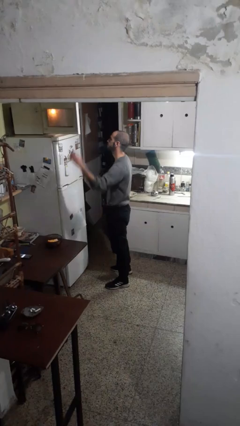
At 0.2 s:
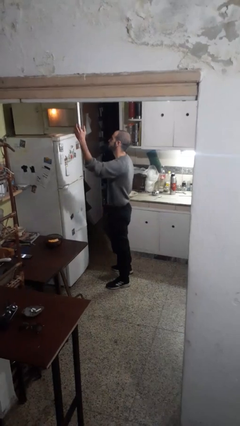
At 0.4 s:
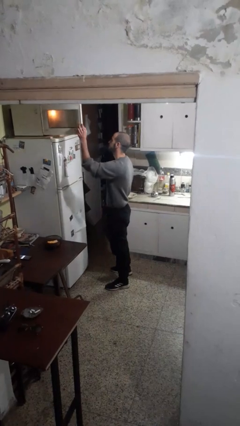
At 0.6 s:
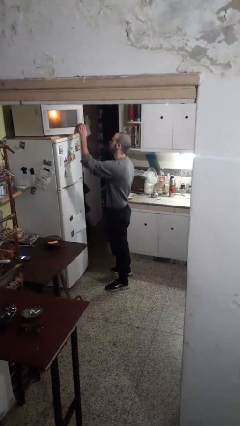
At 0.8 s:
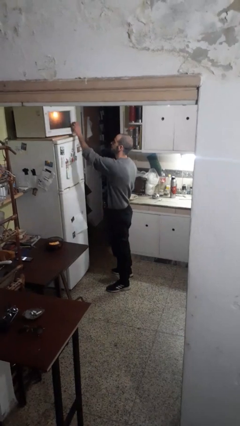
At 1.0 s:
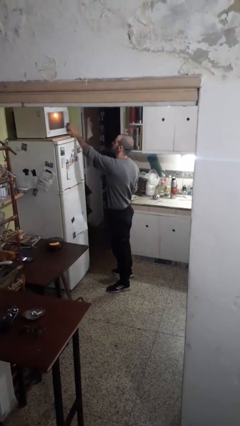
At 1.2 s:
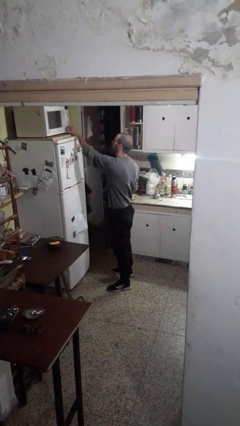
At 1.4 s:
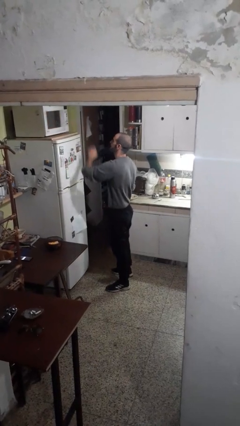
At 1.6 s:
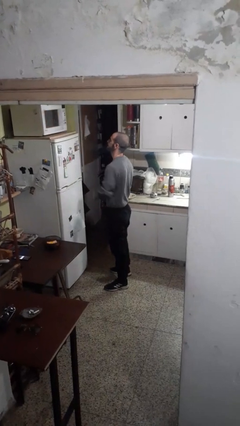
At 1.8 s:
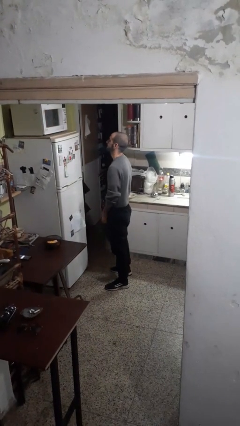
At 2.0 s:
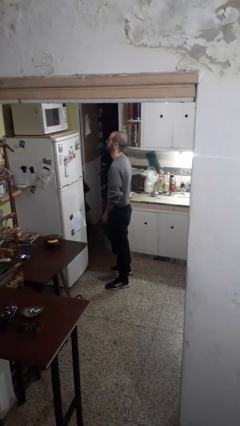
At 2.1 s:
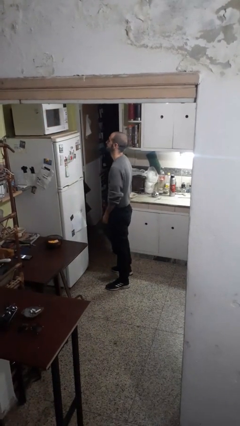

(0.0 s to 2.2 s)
person closes microwave

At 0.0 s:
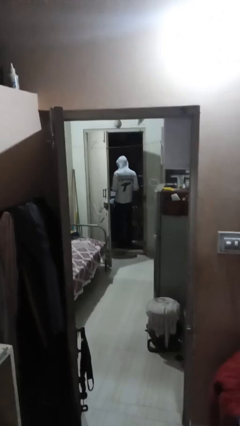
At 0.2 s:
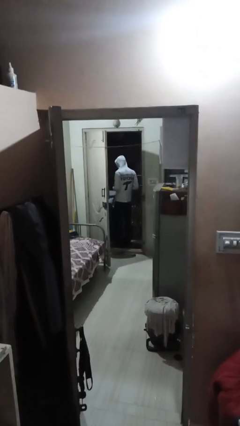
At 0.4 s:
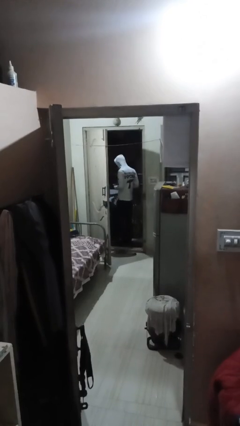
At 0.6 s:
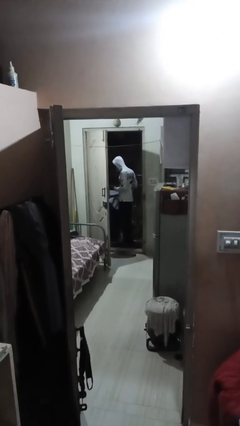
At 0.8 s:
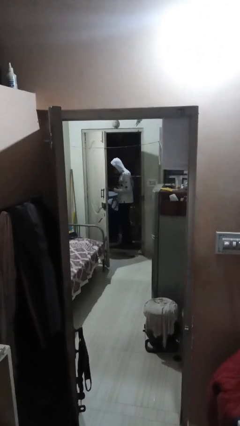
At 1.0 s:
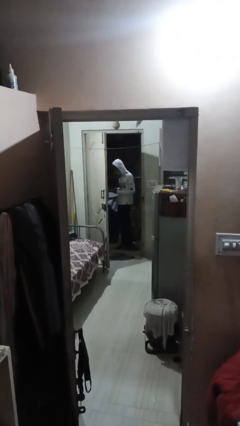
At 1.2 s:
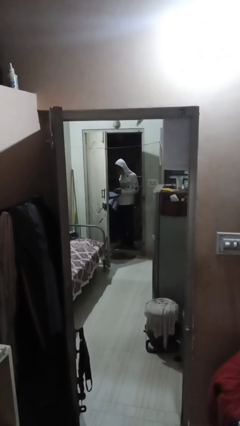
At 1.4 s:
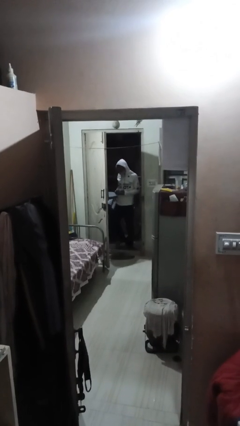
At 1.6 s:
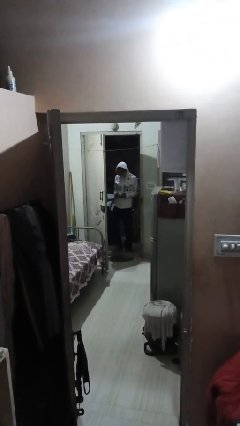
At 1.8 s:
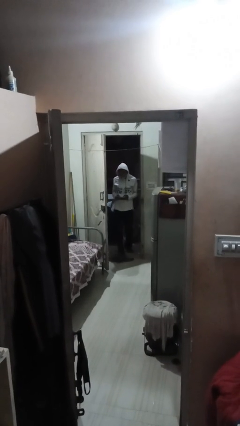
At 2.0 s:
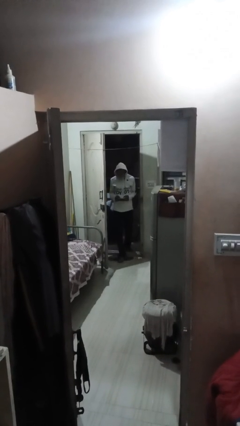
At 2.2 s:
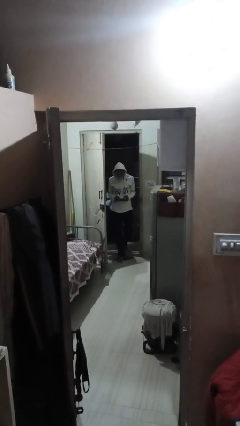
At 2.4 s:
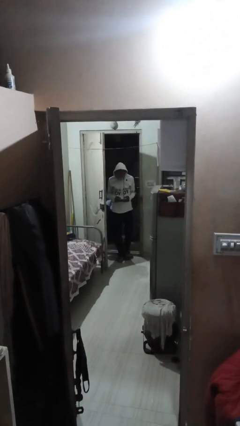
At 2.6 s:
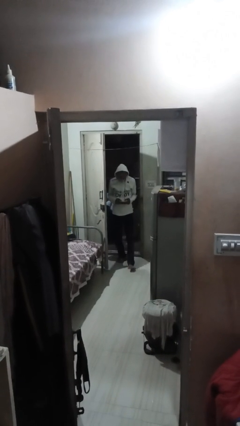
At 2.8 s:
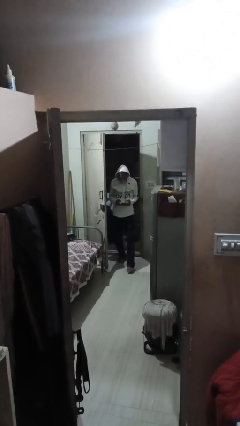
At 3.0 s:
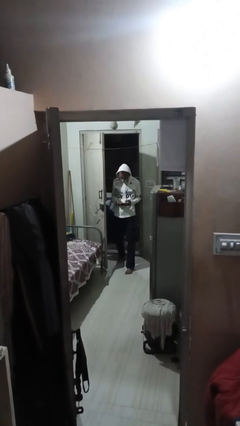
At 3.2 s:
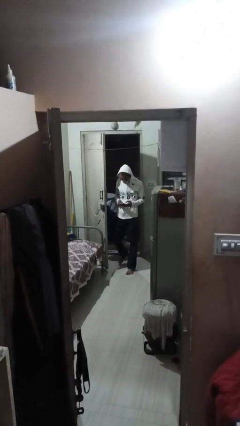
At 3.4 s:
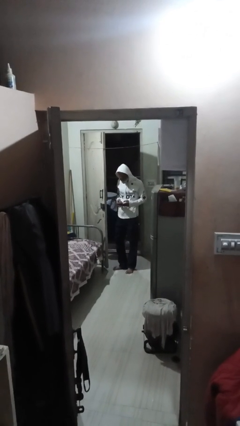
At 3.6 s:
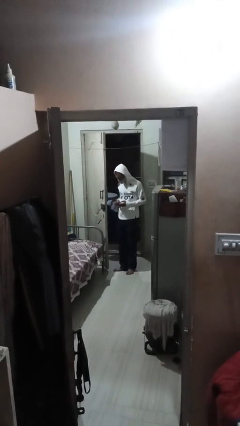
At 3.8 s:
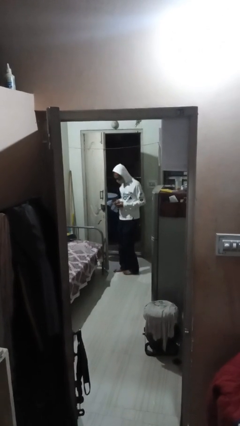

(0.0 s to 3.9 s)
person enters scene through structure

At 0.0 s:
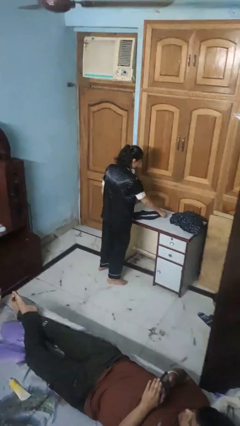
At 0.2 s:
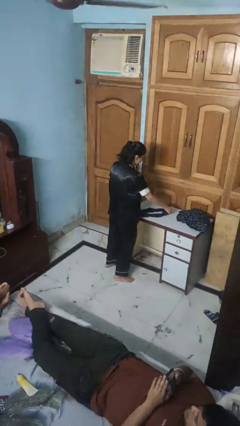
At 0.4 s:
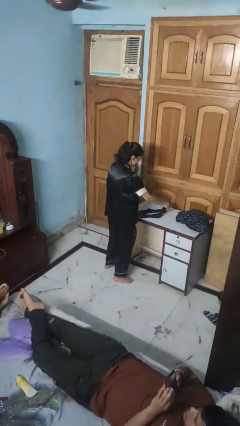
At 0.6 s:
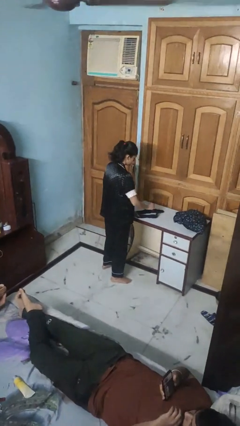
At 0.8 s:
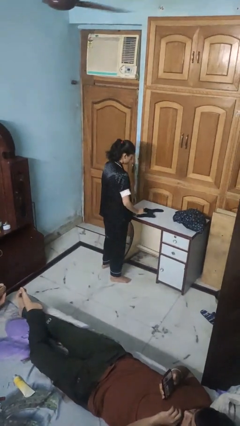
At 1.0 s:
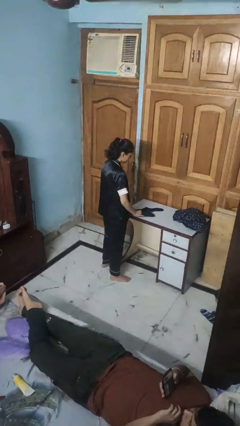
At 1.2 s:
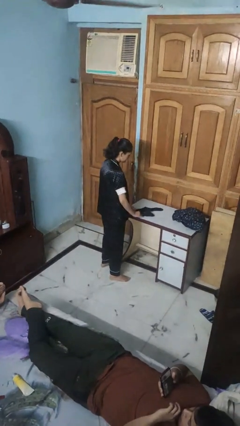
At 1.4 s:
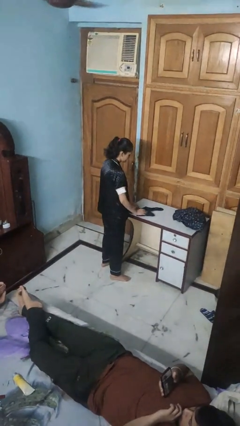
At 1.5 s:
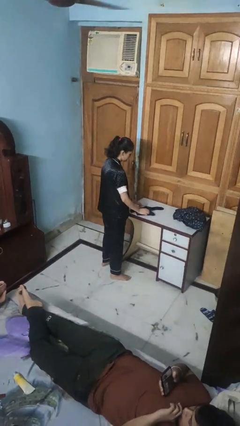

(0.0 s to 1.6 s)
person folds socks

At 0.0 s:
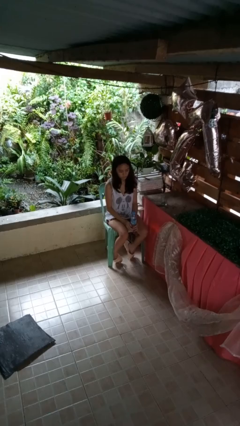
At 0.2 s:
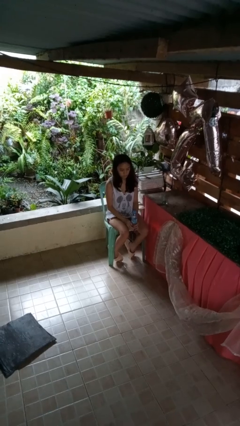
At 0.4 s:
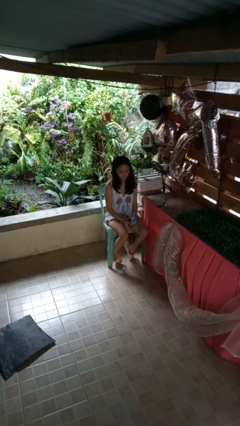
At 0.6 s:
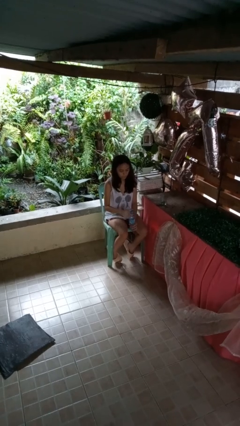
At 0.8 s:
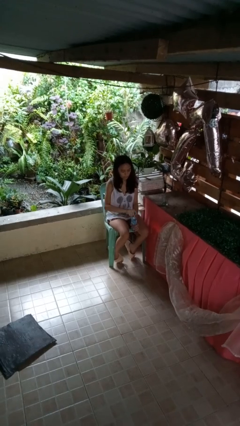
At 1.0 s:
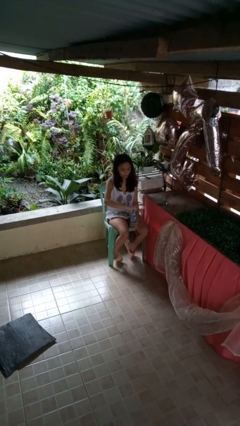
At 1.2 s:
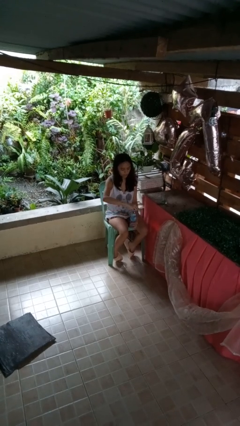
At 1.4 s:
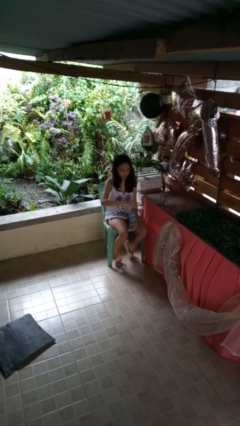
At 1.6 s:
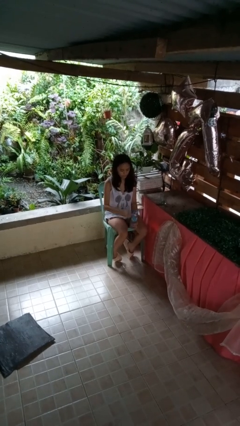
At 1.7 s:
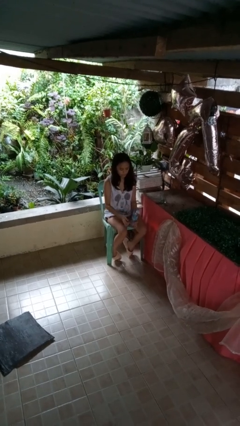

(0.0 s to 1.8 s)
person unscrews lid from bottle

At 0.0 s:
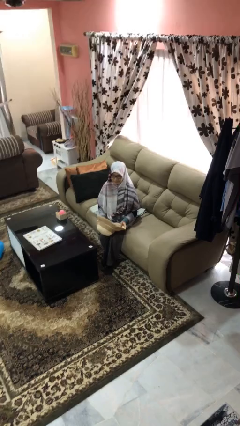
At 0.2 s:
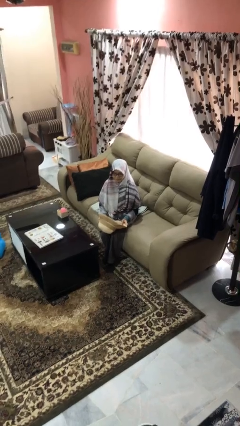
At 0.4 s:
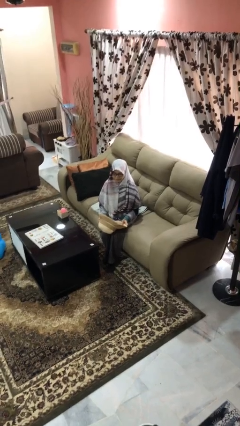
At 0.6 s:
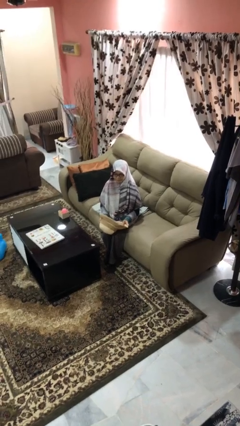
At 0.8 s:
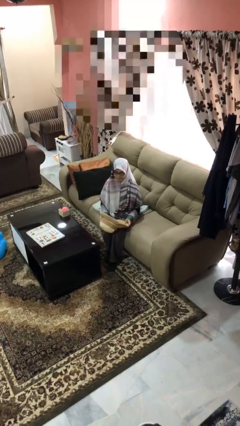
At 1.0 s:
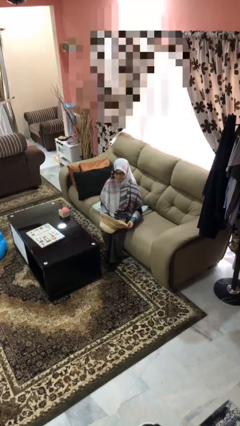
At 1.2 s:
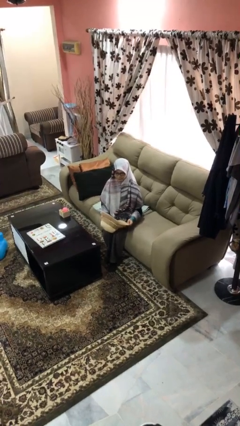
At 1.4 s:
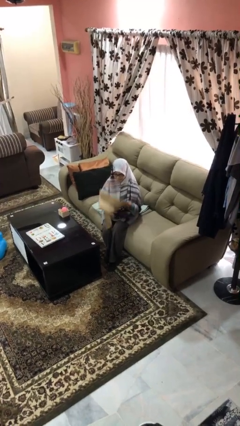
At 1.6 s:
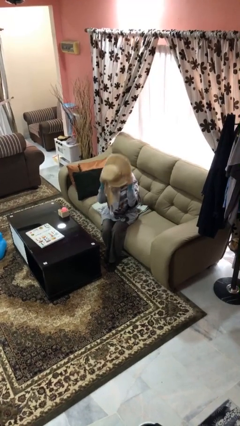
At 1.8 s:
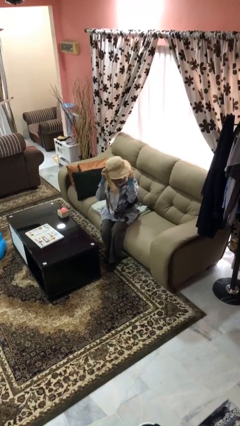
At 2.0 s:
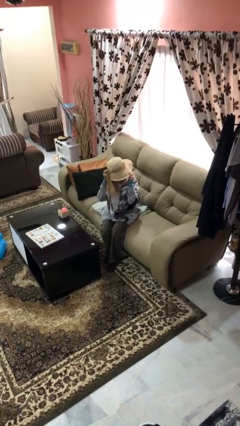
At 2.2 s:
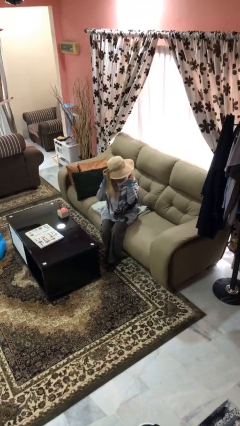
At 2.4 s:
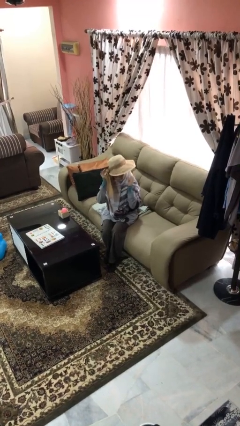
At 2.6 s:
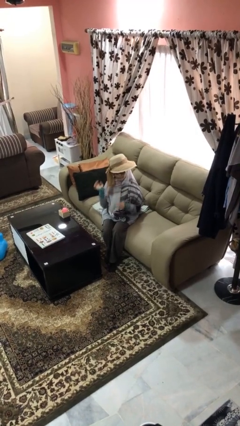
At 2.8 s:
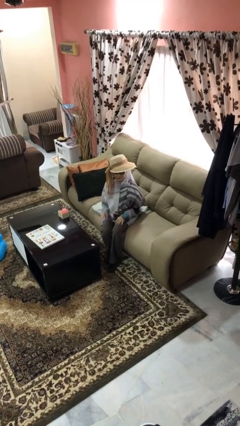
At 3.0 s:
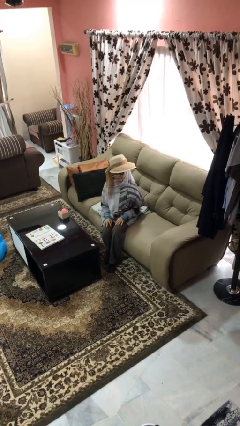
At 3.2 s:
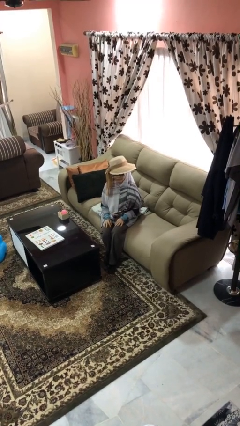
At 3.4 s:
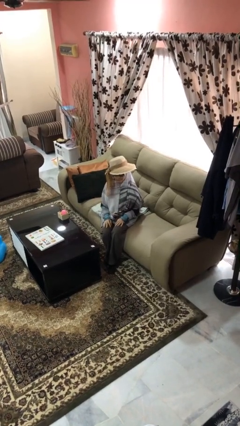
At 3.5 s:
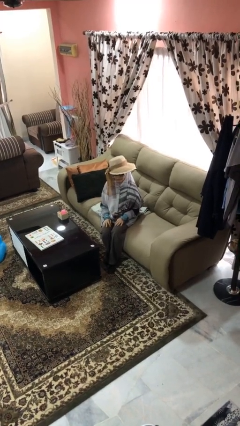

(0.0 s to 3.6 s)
person puts on hat

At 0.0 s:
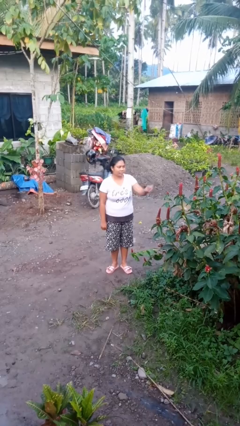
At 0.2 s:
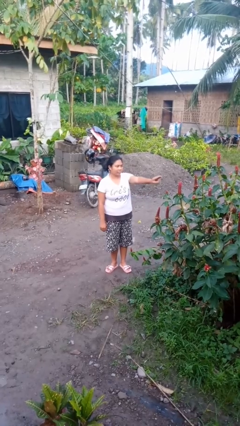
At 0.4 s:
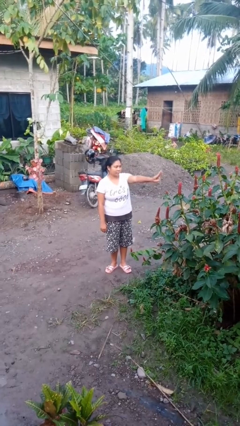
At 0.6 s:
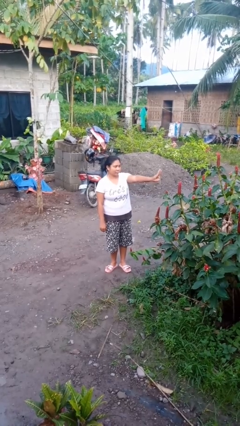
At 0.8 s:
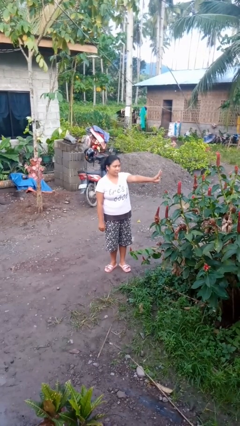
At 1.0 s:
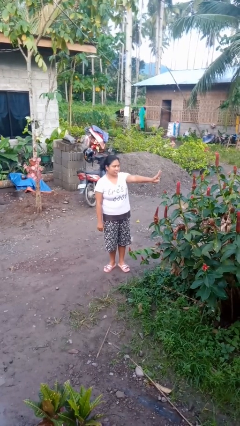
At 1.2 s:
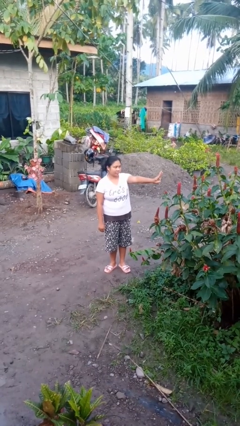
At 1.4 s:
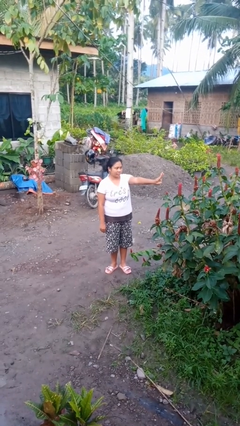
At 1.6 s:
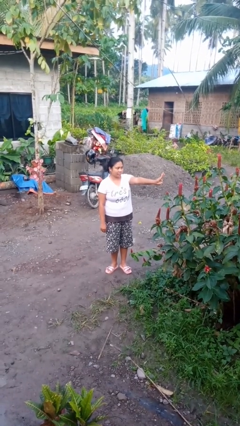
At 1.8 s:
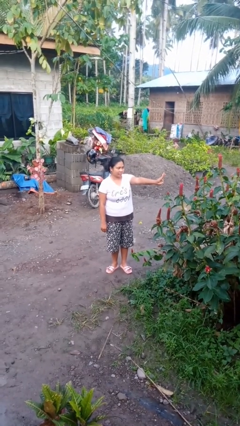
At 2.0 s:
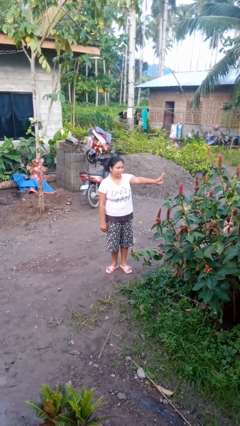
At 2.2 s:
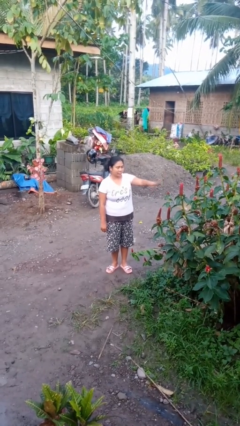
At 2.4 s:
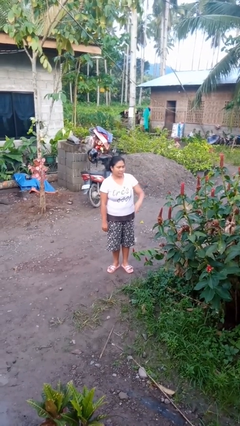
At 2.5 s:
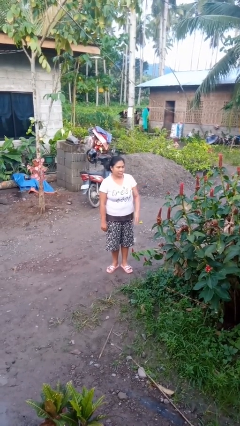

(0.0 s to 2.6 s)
person gestures number three

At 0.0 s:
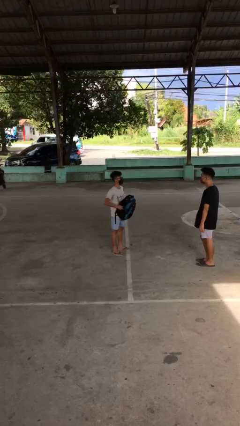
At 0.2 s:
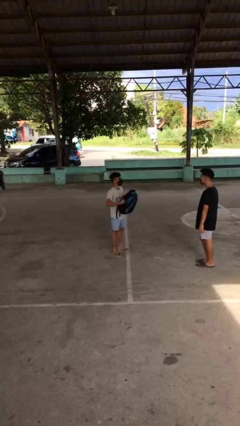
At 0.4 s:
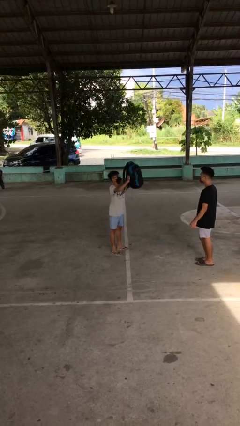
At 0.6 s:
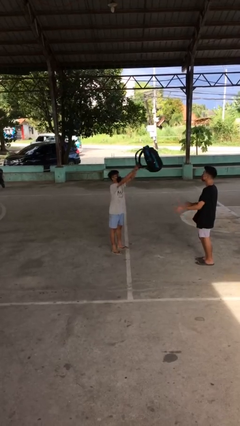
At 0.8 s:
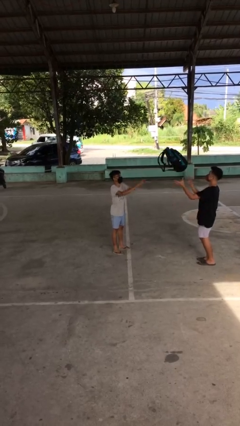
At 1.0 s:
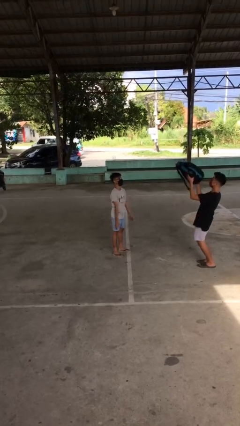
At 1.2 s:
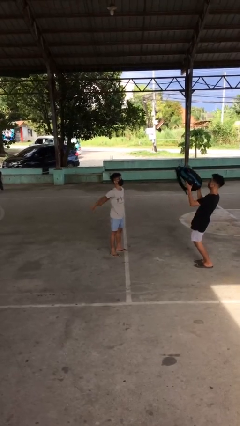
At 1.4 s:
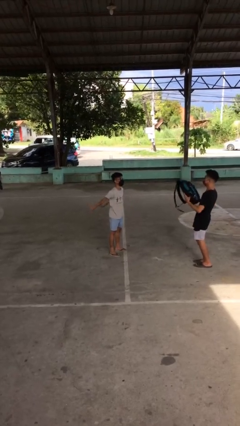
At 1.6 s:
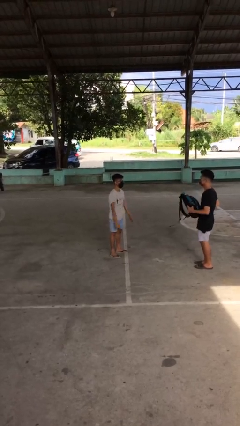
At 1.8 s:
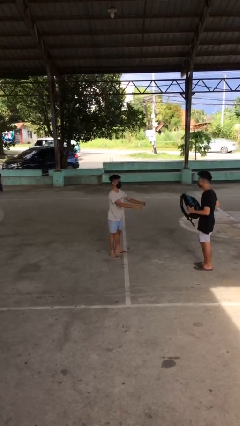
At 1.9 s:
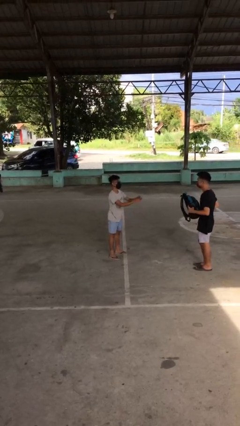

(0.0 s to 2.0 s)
person throws object to person
